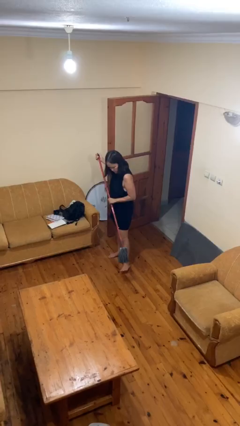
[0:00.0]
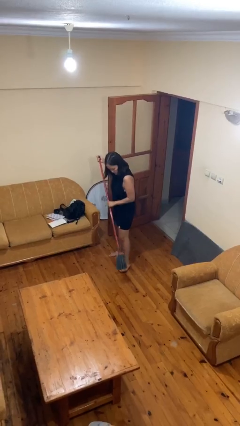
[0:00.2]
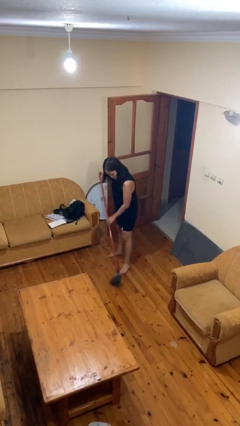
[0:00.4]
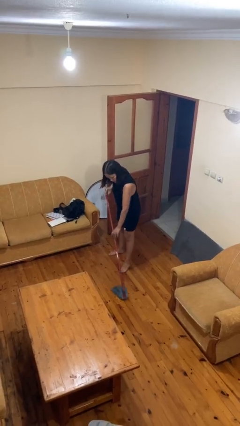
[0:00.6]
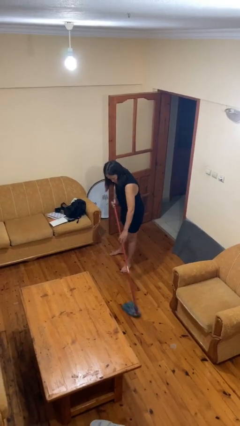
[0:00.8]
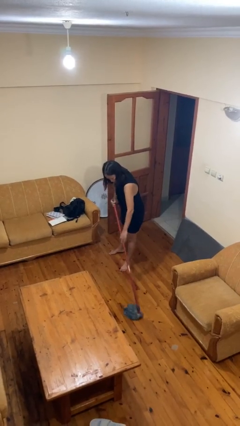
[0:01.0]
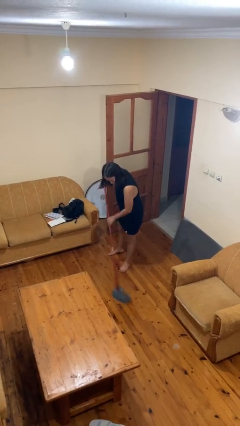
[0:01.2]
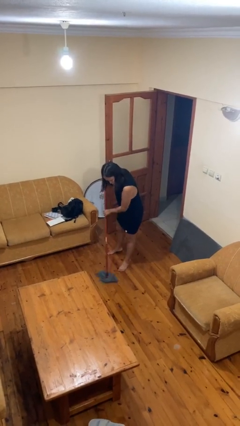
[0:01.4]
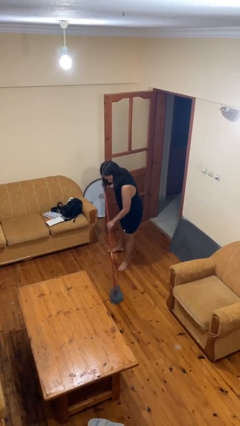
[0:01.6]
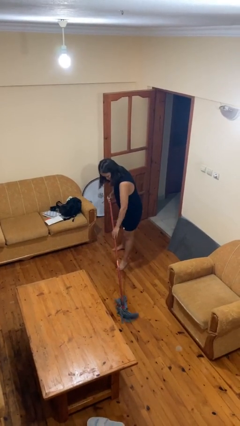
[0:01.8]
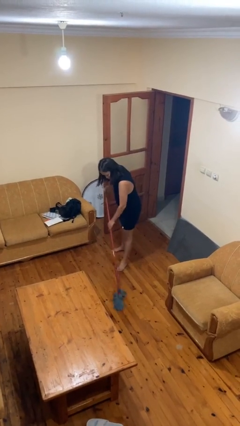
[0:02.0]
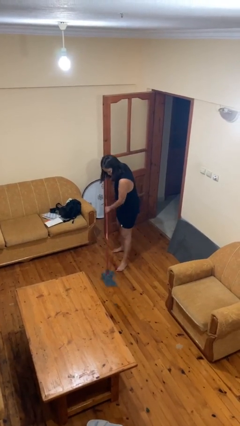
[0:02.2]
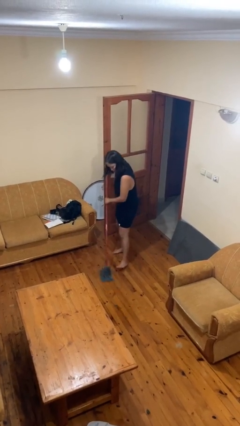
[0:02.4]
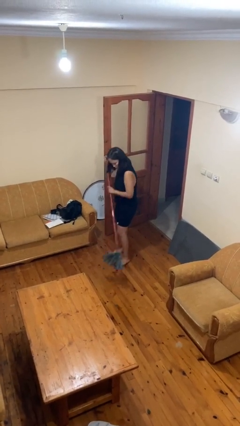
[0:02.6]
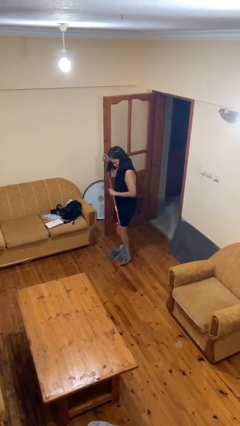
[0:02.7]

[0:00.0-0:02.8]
person mops

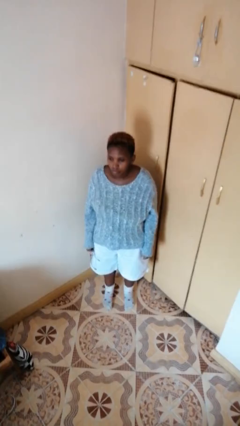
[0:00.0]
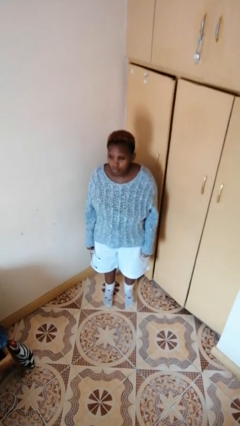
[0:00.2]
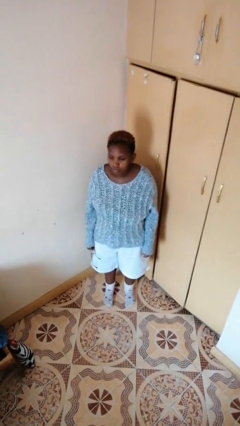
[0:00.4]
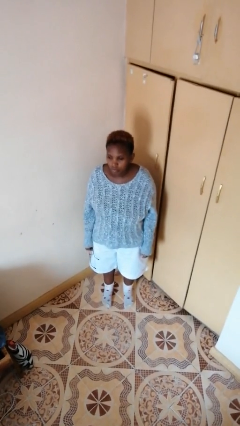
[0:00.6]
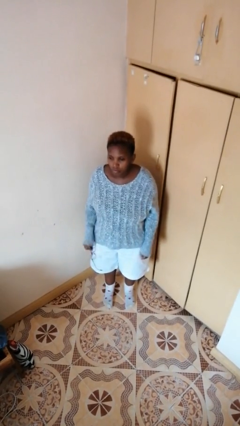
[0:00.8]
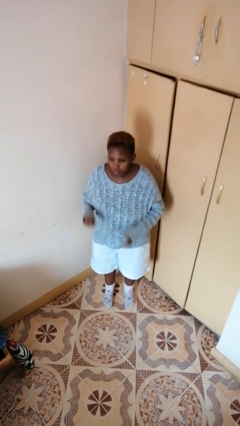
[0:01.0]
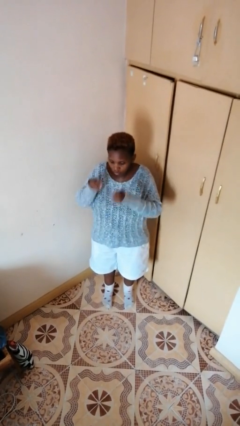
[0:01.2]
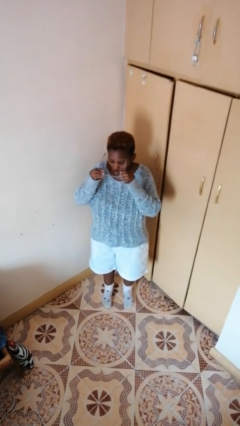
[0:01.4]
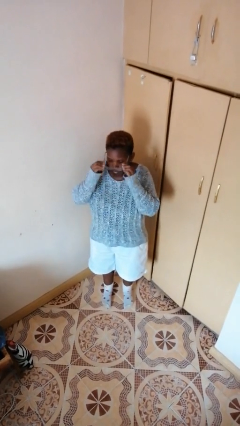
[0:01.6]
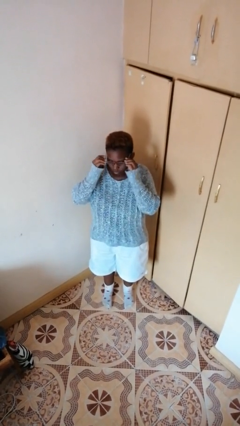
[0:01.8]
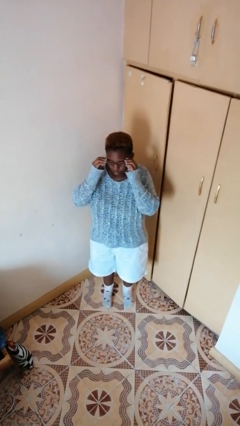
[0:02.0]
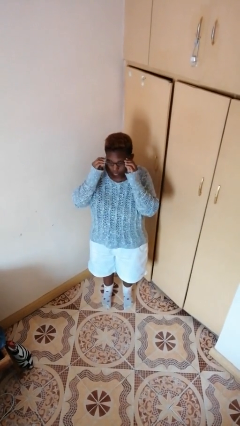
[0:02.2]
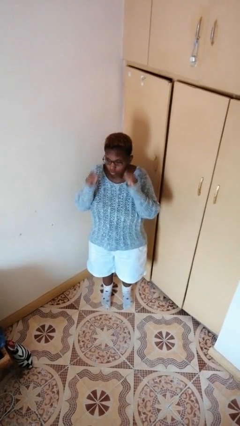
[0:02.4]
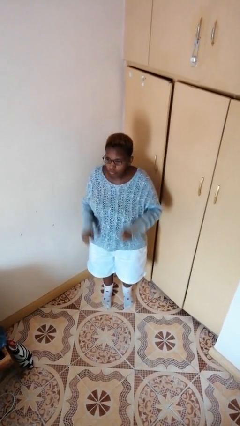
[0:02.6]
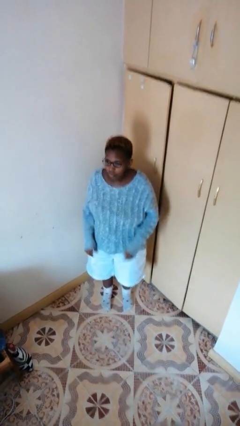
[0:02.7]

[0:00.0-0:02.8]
person puts on glasses

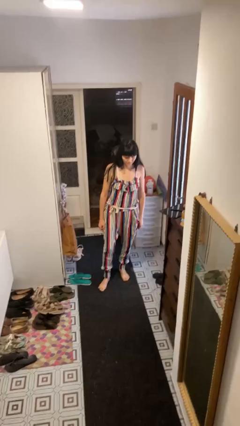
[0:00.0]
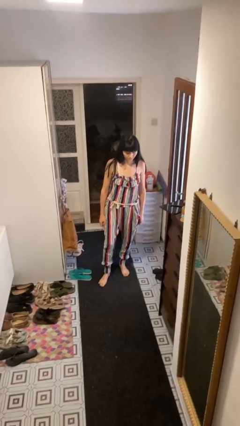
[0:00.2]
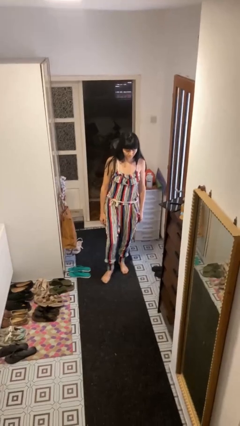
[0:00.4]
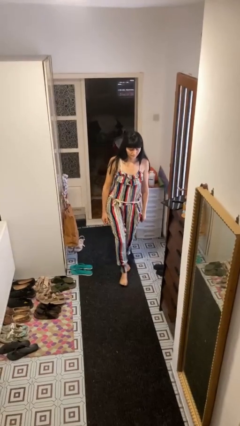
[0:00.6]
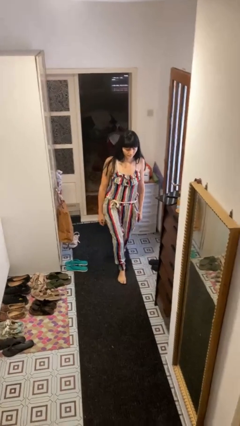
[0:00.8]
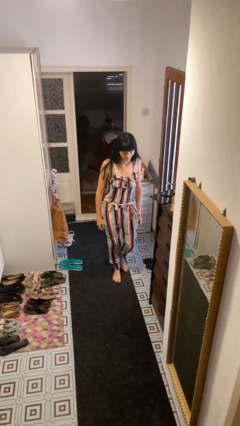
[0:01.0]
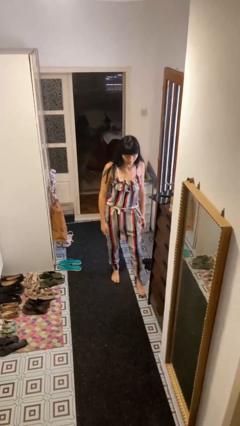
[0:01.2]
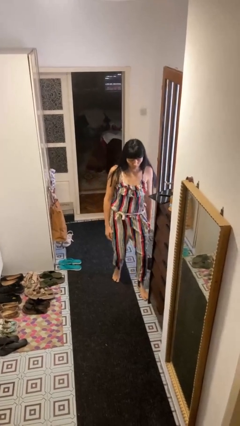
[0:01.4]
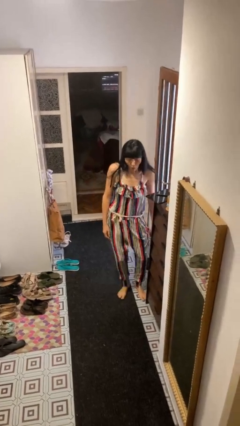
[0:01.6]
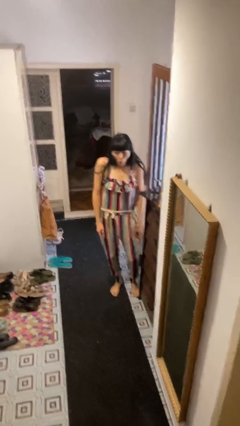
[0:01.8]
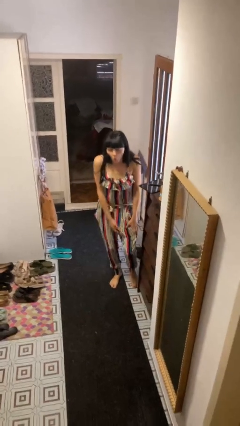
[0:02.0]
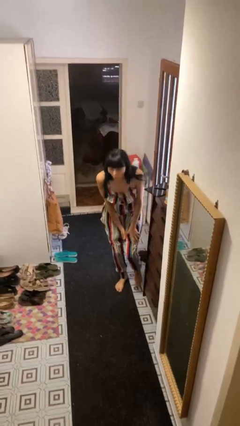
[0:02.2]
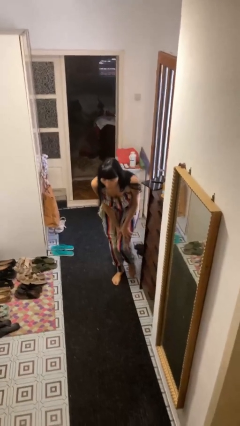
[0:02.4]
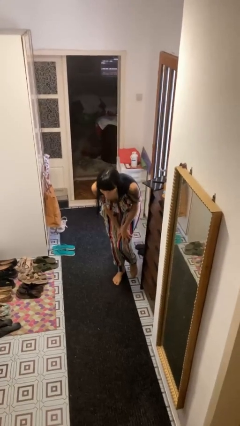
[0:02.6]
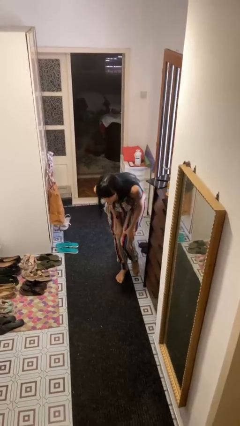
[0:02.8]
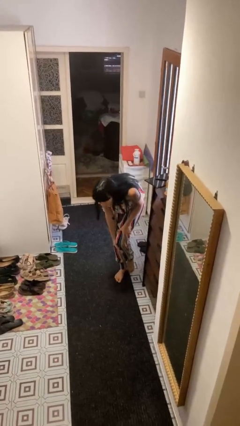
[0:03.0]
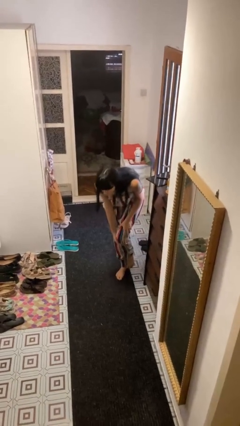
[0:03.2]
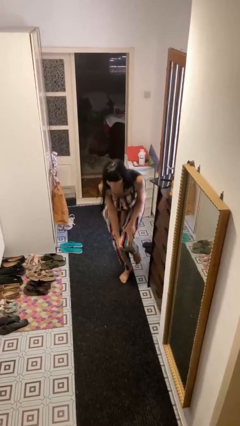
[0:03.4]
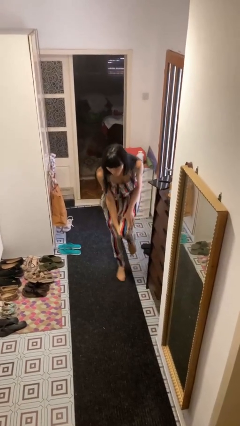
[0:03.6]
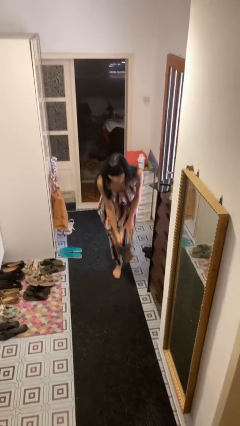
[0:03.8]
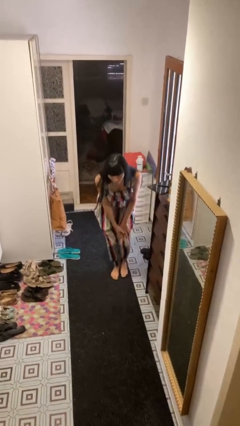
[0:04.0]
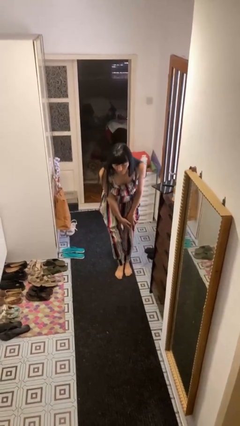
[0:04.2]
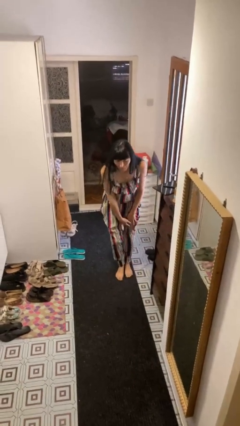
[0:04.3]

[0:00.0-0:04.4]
person stubs toe

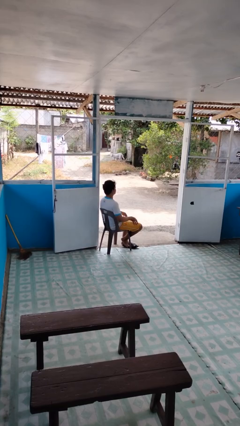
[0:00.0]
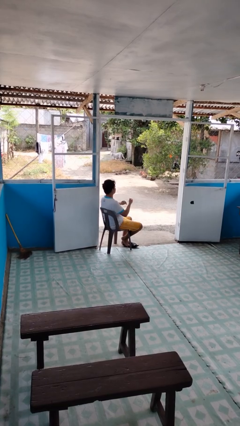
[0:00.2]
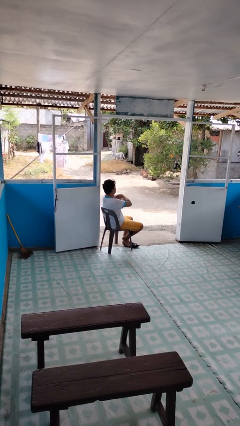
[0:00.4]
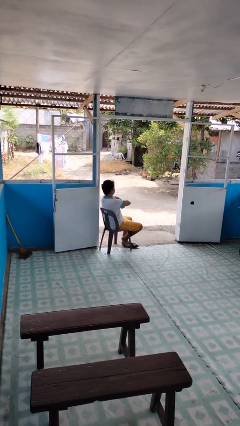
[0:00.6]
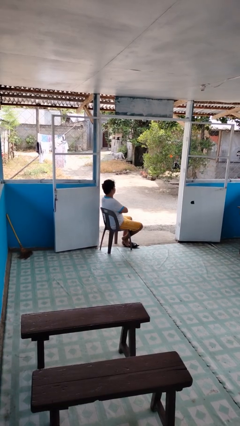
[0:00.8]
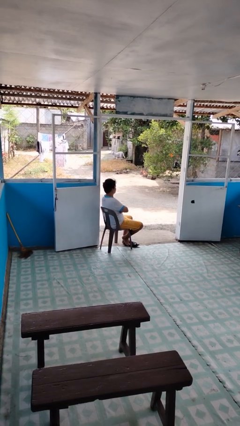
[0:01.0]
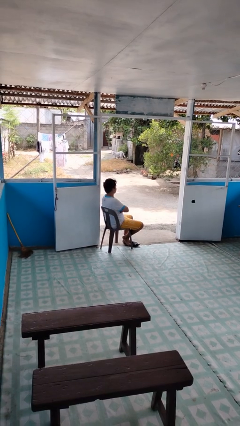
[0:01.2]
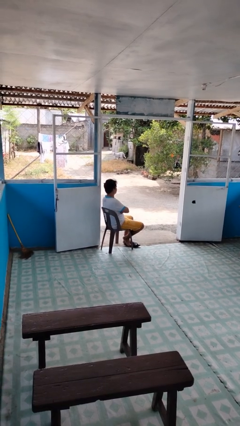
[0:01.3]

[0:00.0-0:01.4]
person crosses arms

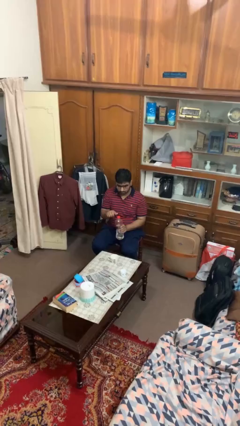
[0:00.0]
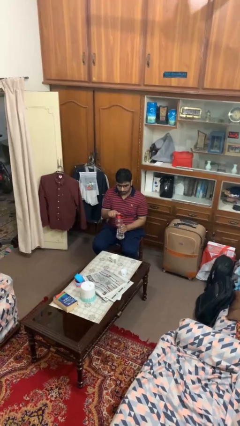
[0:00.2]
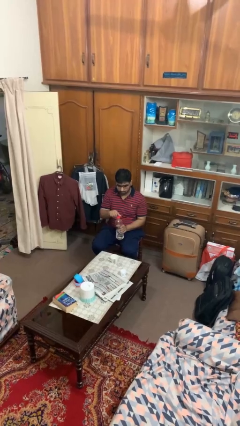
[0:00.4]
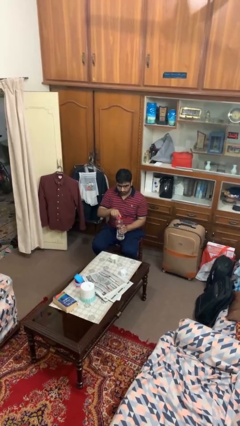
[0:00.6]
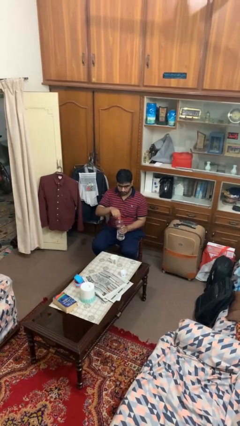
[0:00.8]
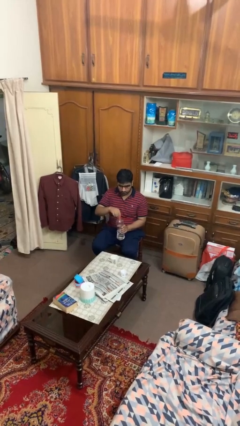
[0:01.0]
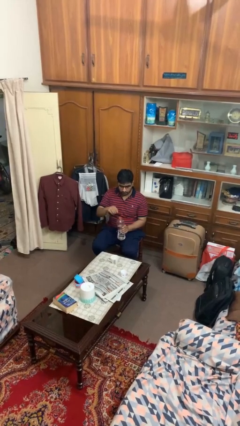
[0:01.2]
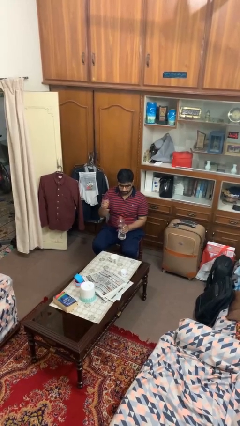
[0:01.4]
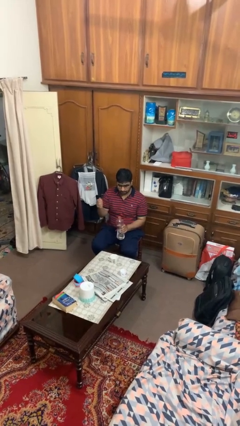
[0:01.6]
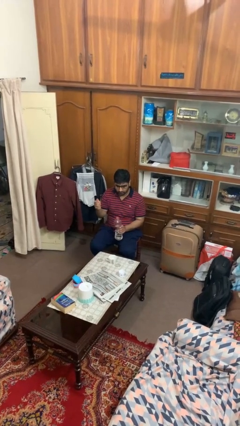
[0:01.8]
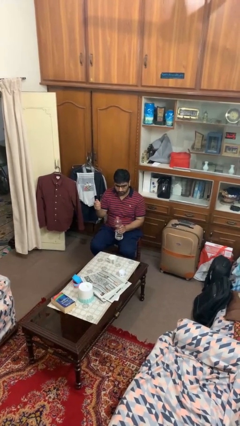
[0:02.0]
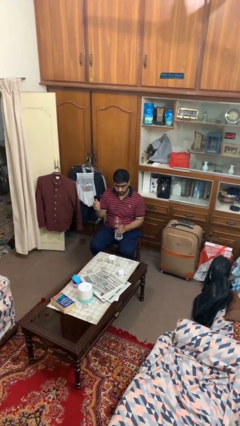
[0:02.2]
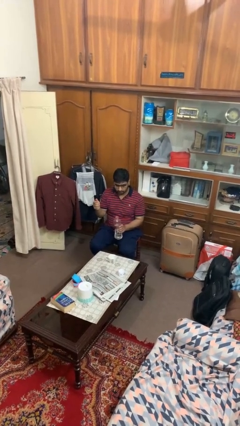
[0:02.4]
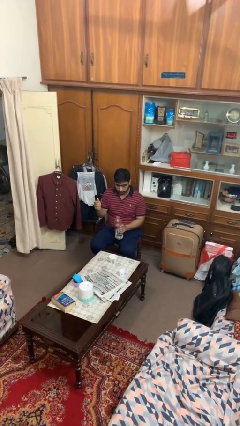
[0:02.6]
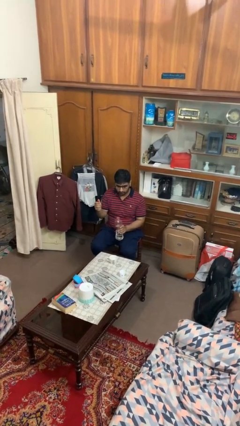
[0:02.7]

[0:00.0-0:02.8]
person unscrews lid from bottle

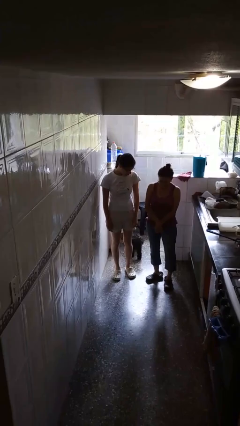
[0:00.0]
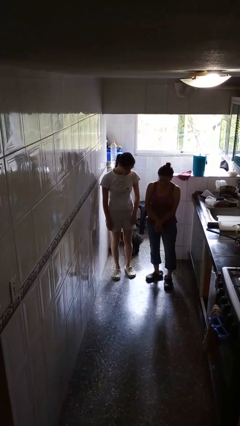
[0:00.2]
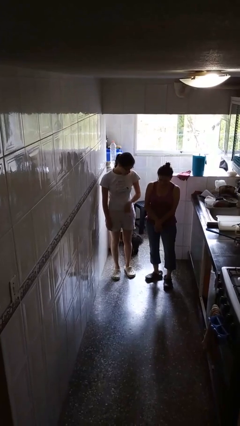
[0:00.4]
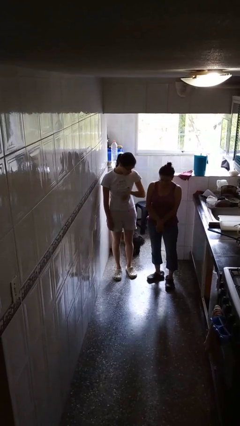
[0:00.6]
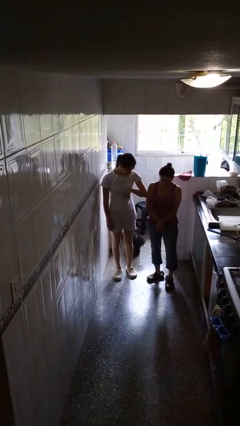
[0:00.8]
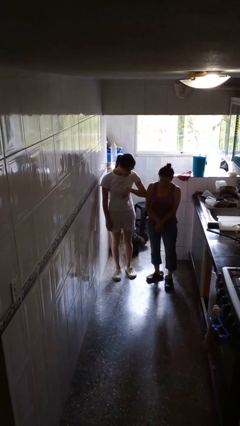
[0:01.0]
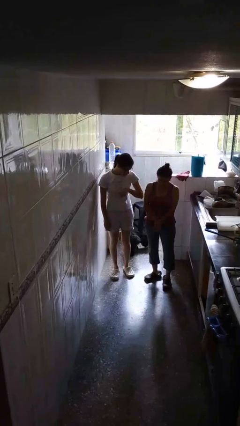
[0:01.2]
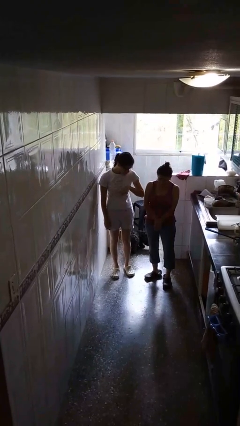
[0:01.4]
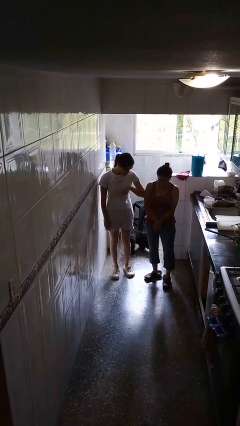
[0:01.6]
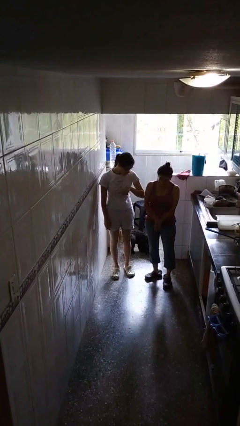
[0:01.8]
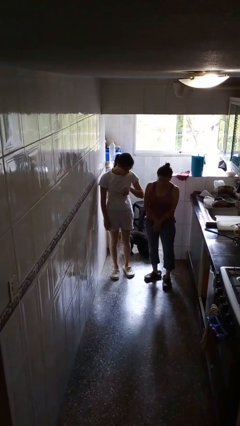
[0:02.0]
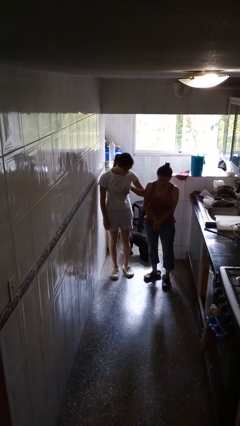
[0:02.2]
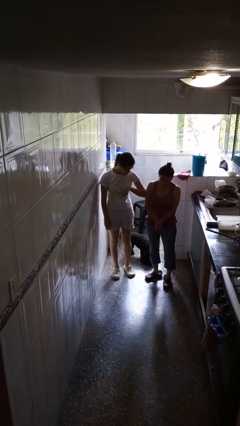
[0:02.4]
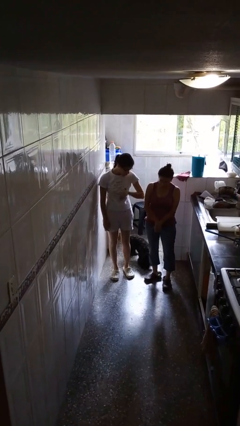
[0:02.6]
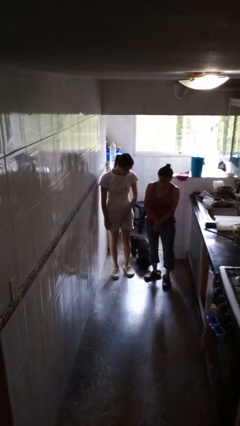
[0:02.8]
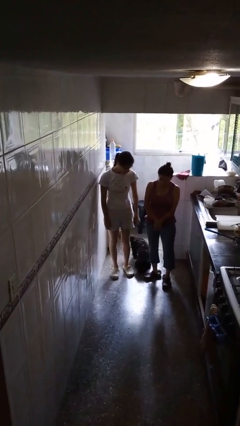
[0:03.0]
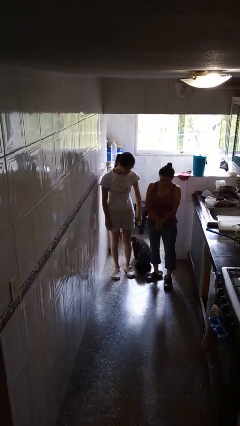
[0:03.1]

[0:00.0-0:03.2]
person nudges person with elbow
